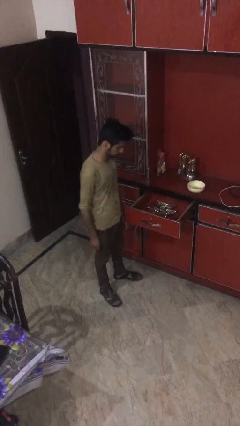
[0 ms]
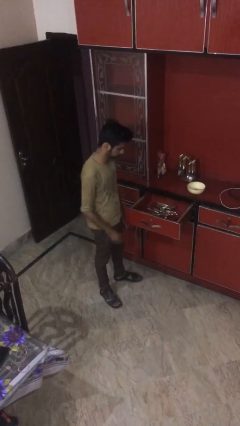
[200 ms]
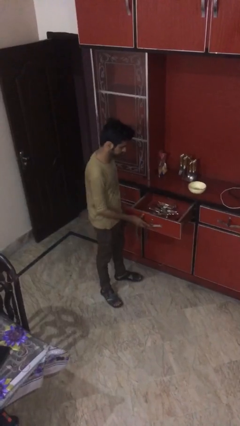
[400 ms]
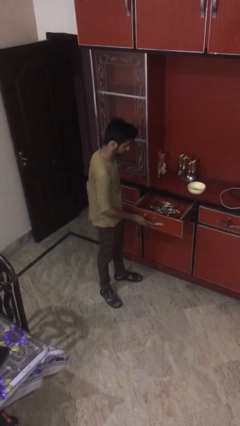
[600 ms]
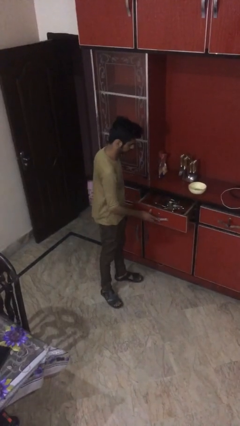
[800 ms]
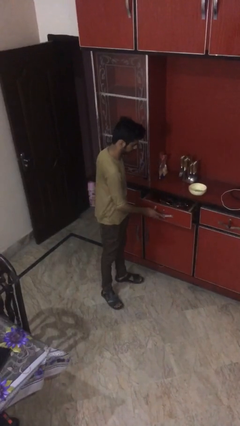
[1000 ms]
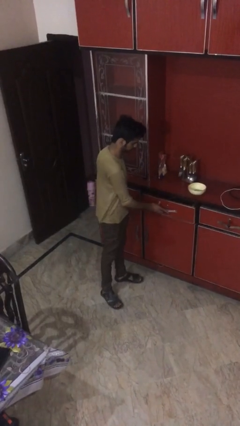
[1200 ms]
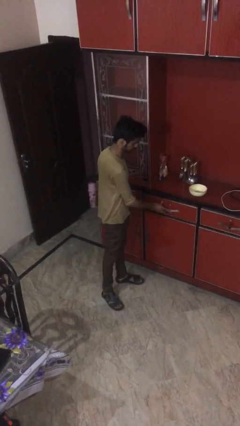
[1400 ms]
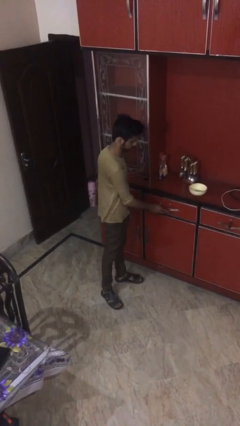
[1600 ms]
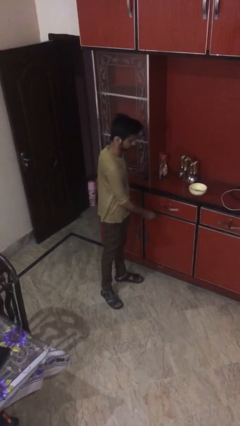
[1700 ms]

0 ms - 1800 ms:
person closes kitchen drawer

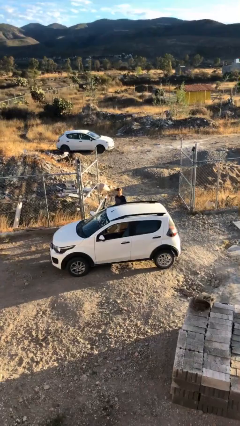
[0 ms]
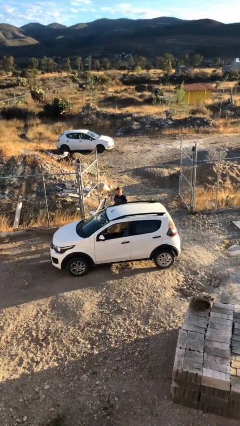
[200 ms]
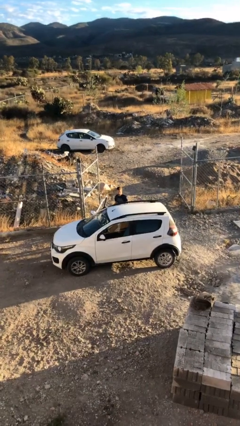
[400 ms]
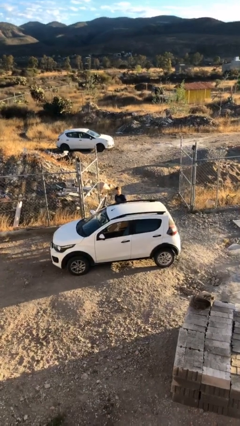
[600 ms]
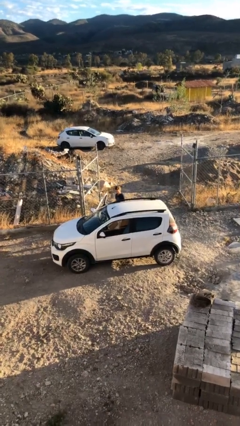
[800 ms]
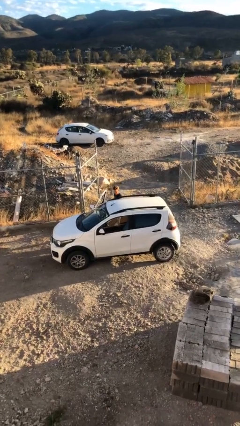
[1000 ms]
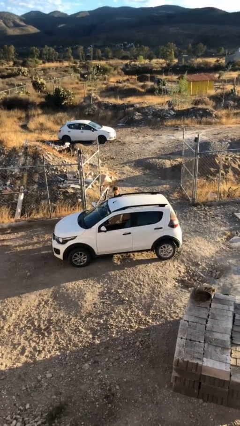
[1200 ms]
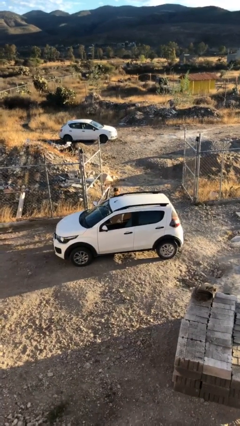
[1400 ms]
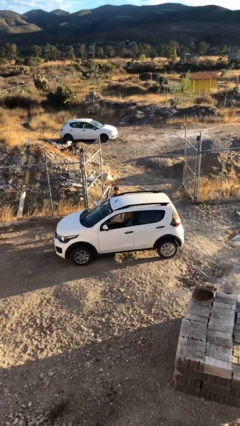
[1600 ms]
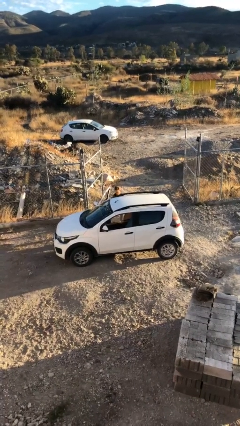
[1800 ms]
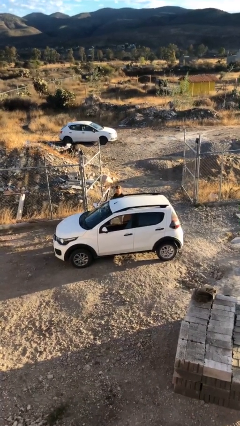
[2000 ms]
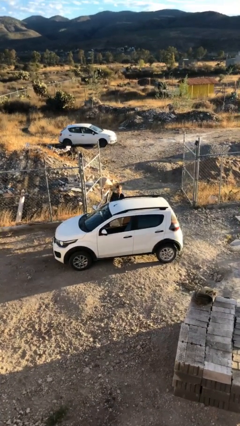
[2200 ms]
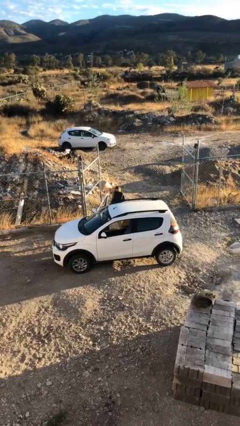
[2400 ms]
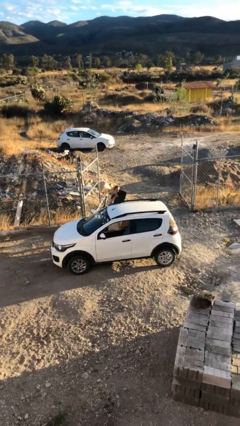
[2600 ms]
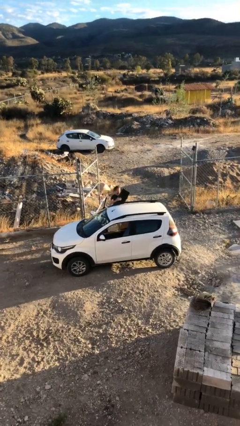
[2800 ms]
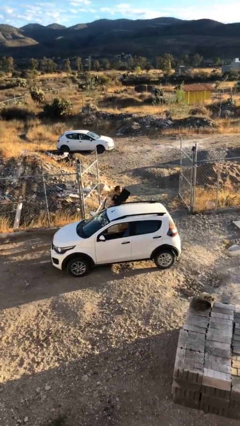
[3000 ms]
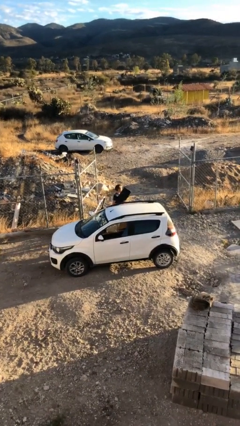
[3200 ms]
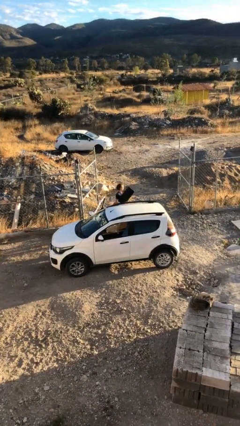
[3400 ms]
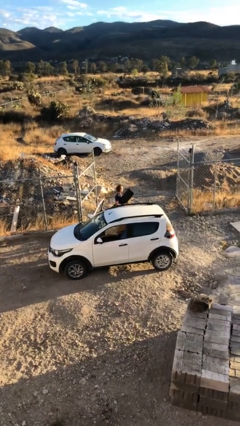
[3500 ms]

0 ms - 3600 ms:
person unloads car

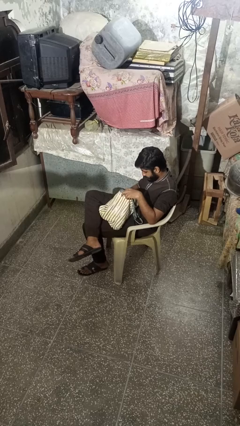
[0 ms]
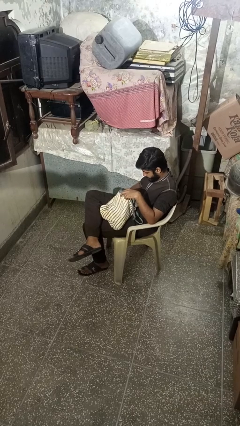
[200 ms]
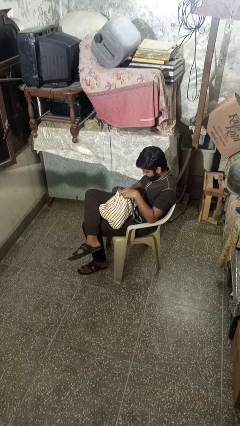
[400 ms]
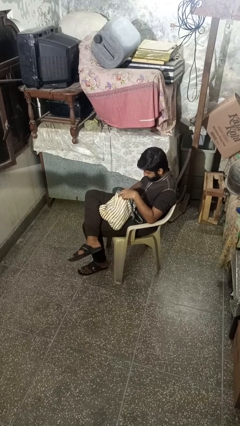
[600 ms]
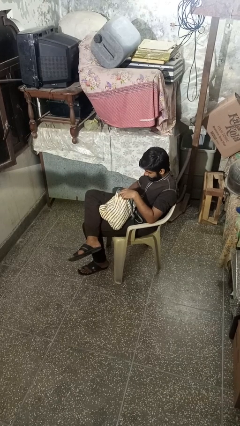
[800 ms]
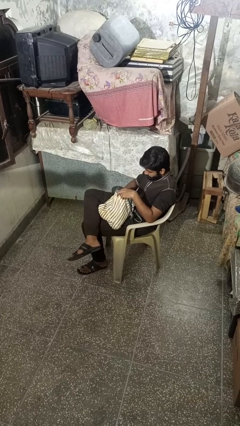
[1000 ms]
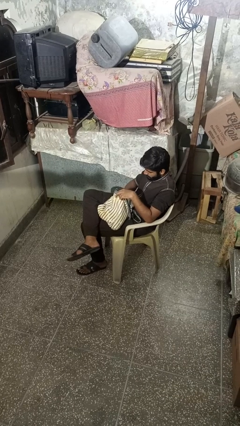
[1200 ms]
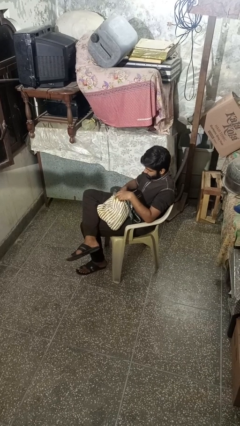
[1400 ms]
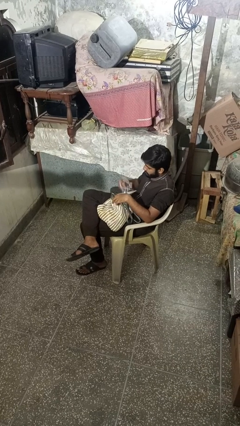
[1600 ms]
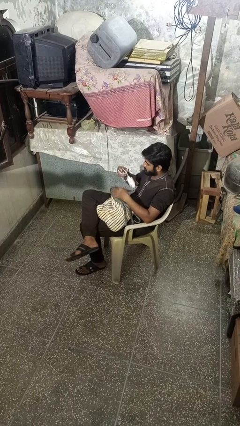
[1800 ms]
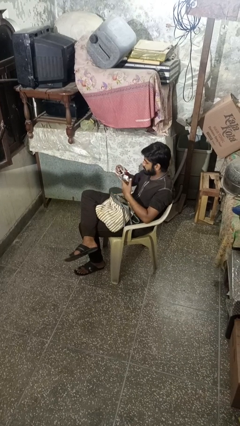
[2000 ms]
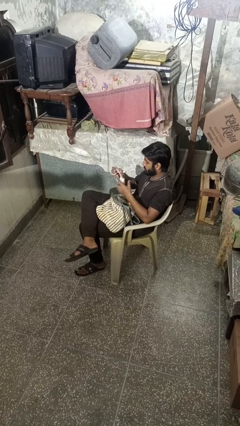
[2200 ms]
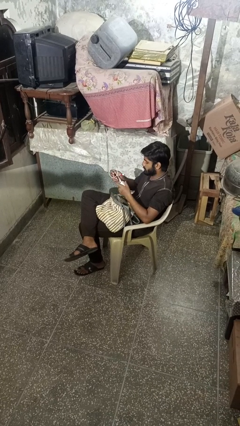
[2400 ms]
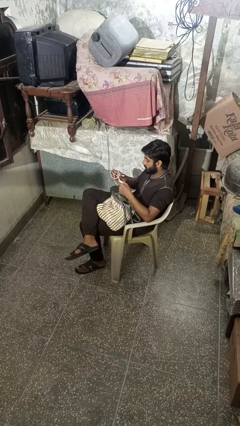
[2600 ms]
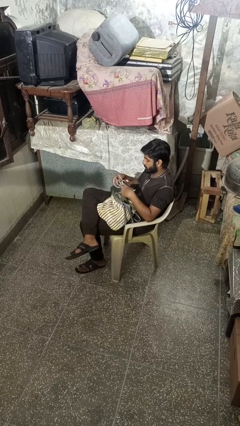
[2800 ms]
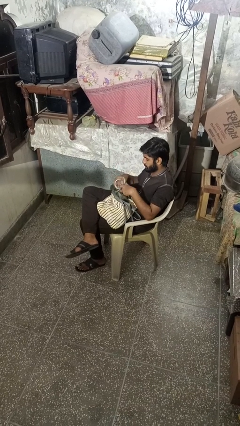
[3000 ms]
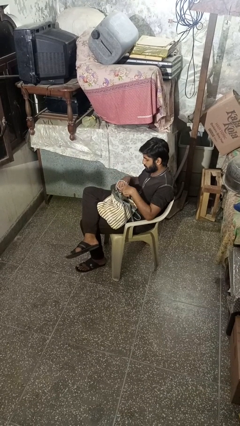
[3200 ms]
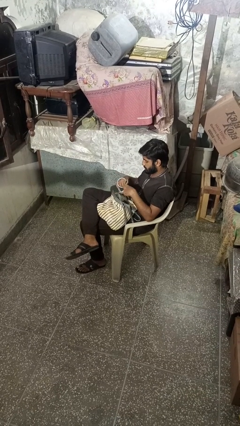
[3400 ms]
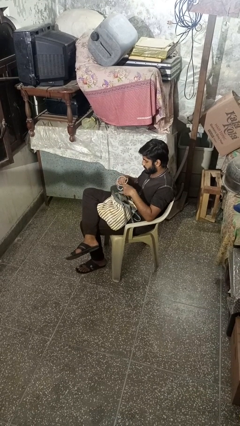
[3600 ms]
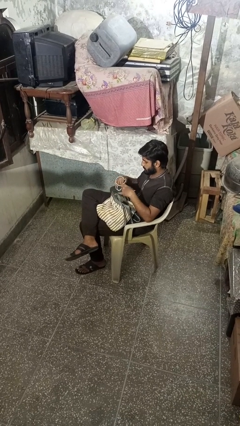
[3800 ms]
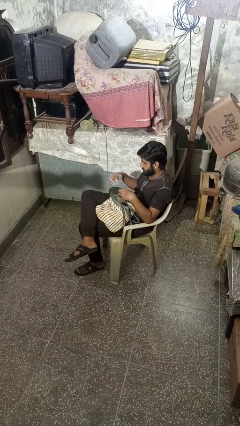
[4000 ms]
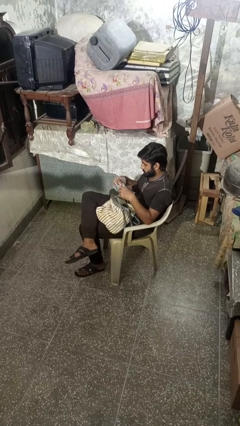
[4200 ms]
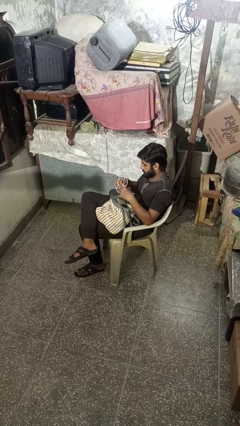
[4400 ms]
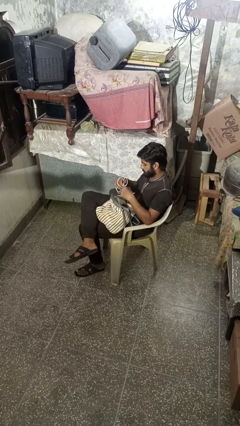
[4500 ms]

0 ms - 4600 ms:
person takes object from purse

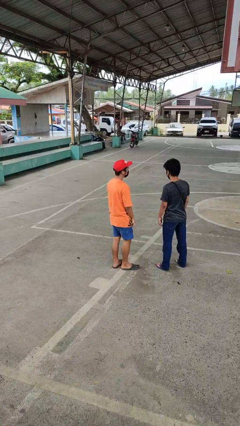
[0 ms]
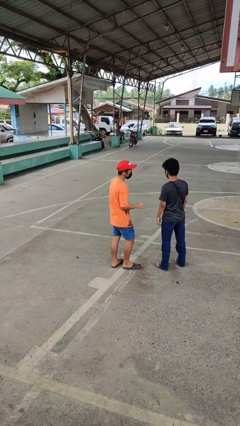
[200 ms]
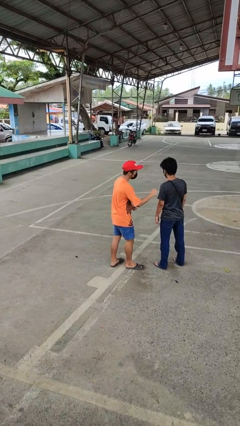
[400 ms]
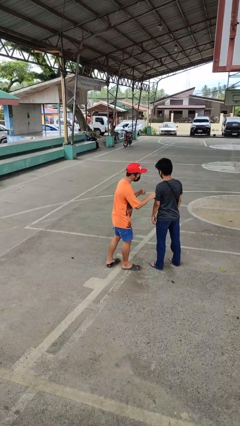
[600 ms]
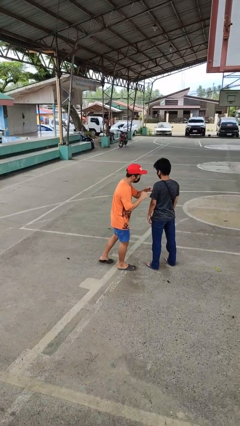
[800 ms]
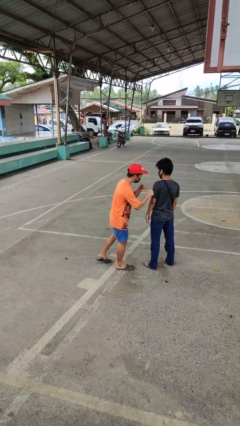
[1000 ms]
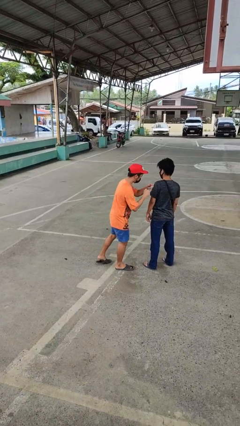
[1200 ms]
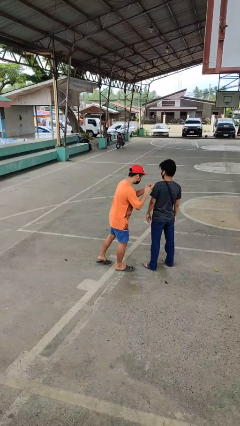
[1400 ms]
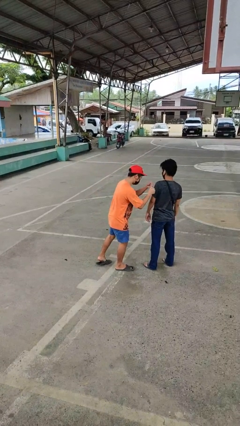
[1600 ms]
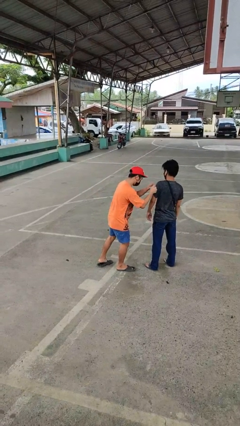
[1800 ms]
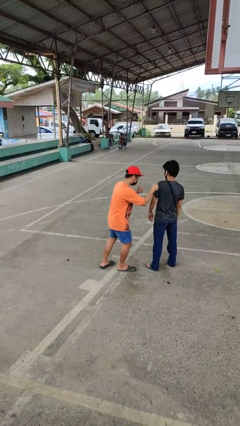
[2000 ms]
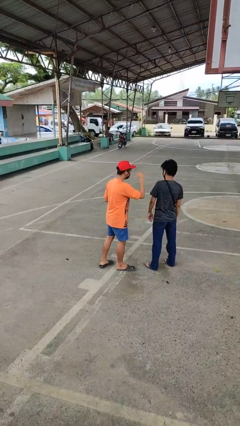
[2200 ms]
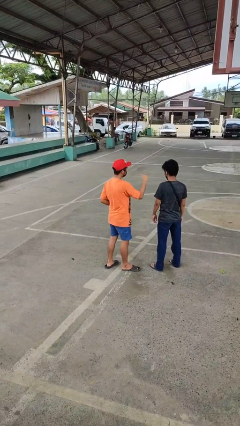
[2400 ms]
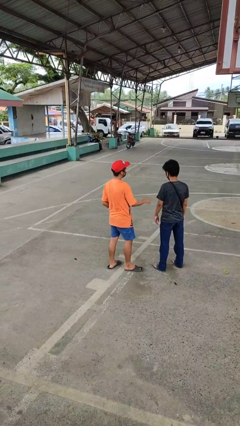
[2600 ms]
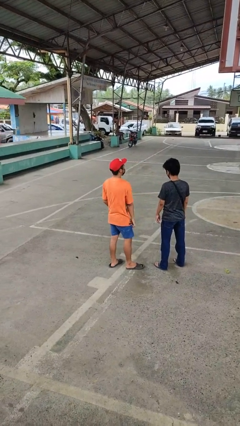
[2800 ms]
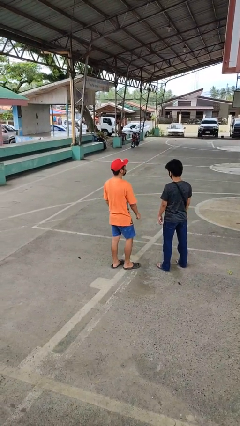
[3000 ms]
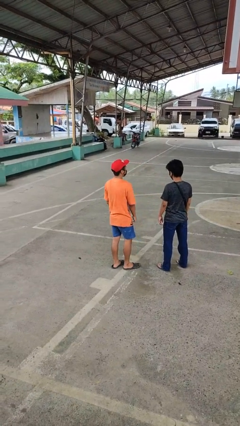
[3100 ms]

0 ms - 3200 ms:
person pounds shoulders of person

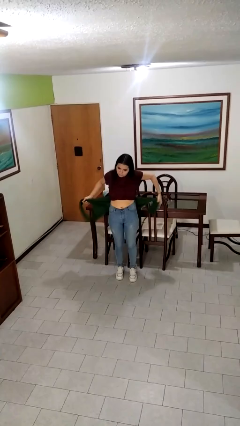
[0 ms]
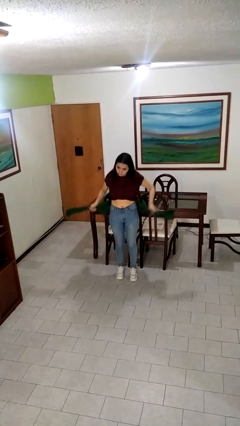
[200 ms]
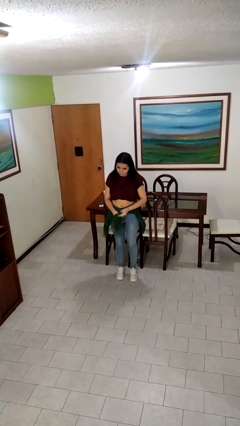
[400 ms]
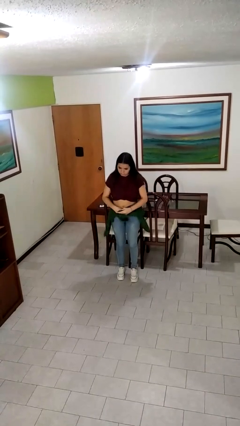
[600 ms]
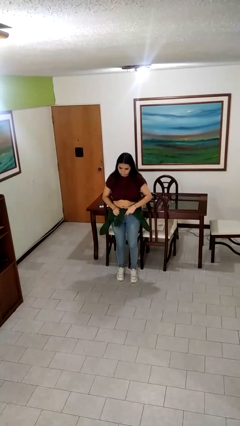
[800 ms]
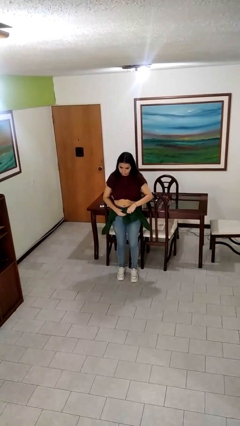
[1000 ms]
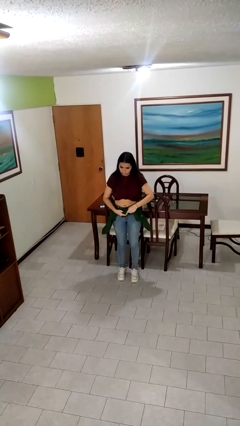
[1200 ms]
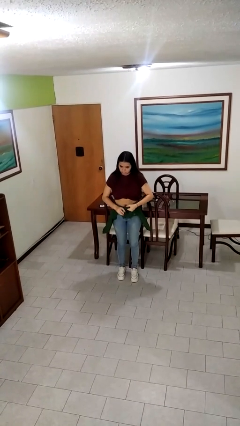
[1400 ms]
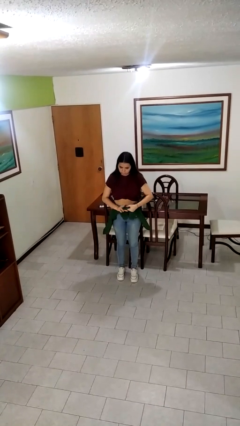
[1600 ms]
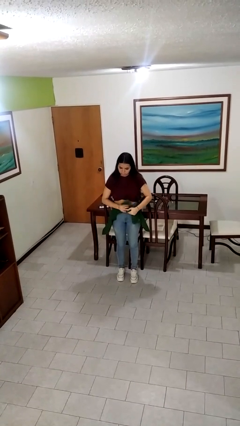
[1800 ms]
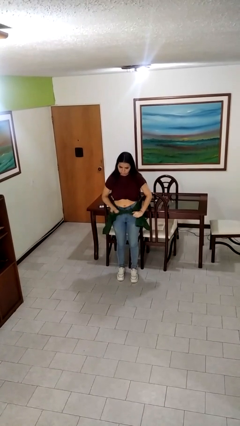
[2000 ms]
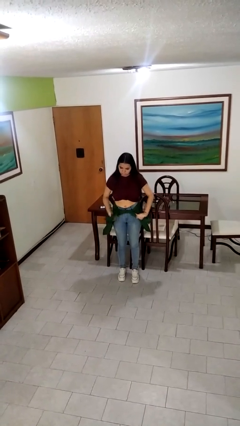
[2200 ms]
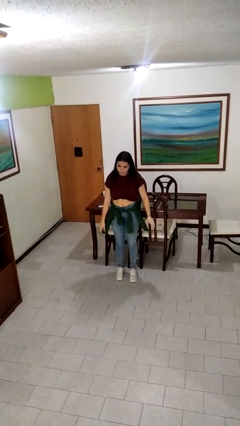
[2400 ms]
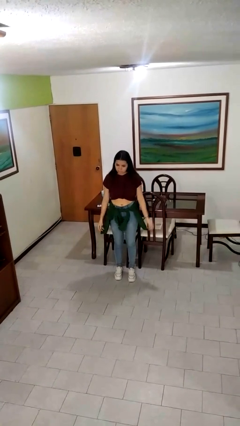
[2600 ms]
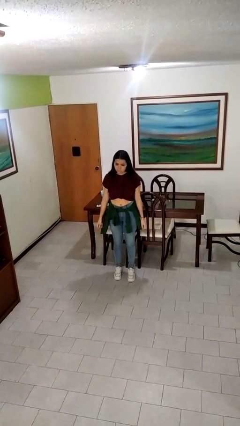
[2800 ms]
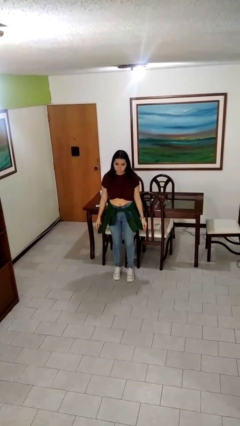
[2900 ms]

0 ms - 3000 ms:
person ties jacket around waist

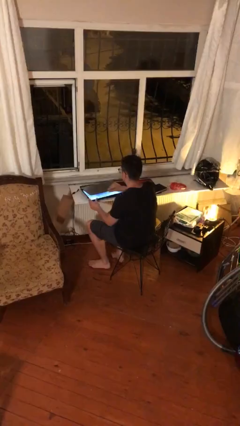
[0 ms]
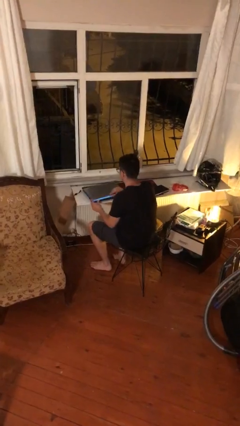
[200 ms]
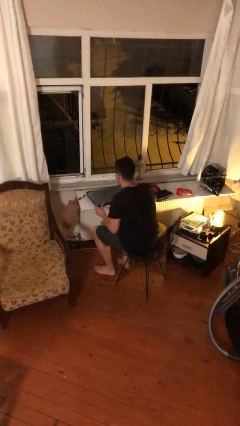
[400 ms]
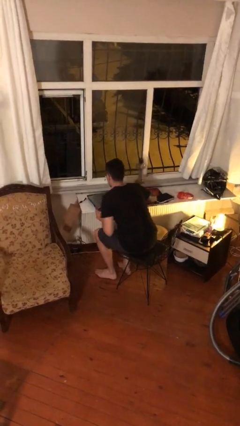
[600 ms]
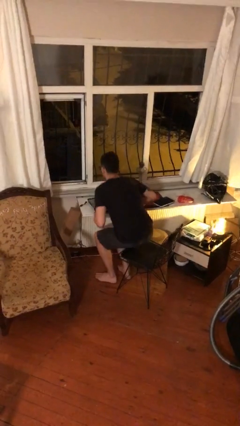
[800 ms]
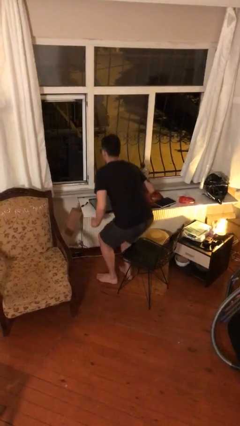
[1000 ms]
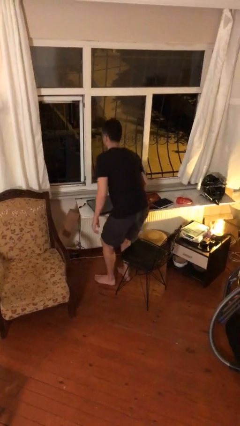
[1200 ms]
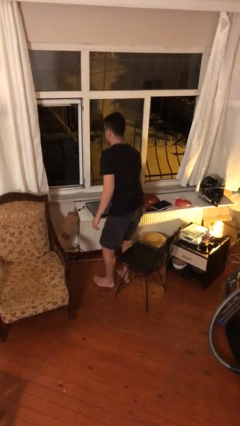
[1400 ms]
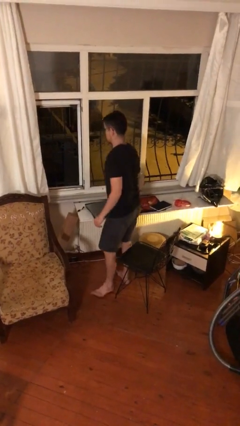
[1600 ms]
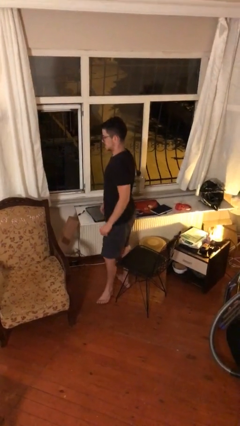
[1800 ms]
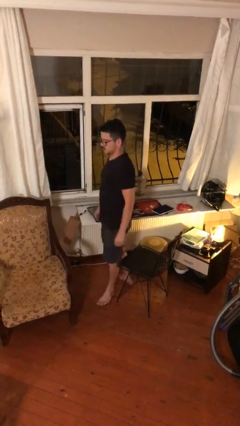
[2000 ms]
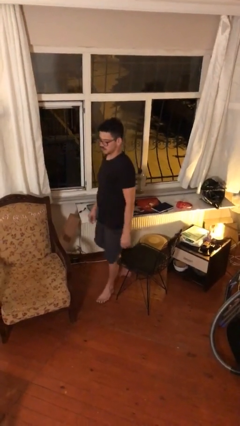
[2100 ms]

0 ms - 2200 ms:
person stands up
